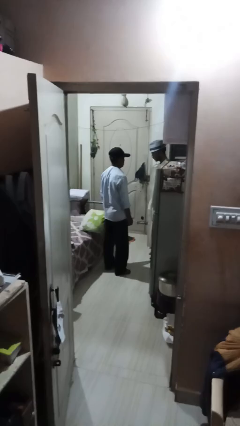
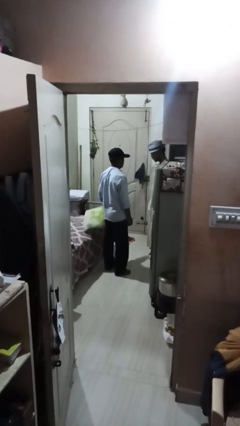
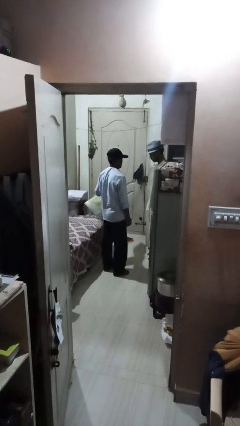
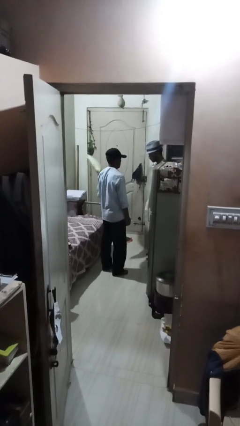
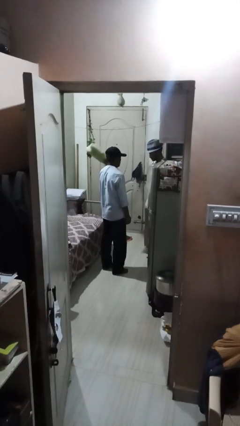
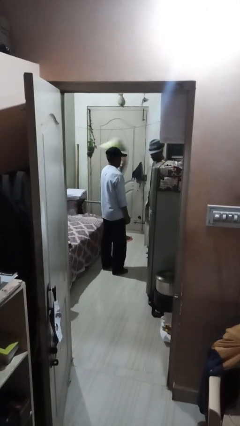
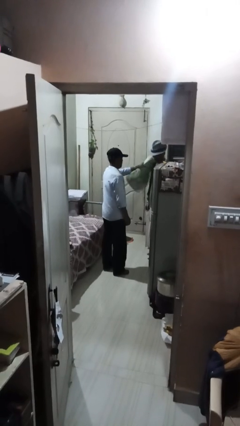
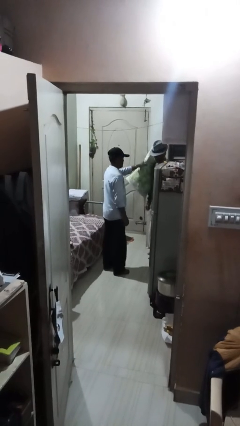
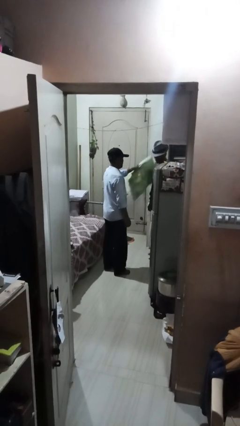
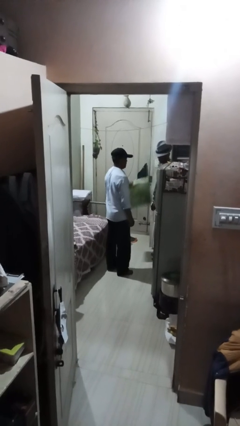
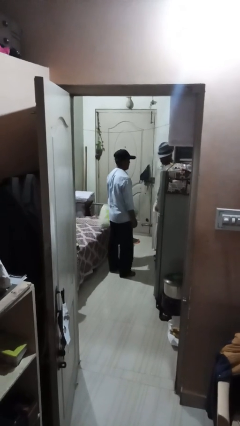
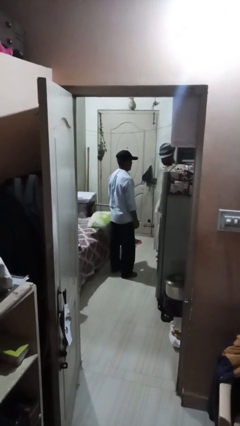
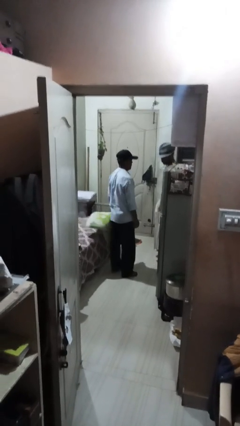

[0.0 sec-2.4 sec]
person hits person with pillow

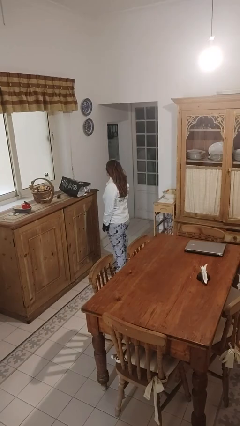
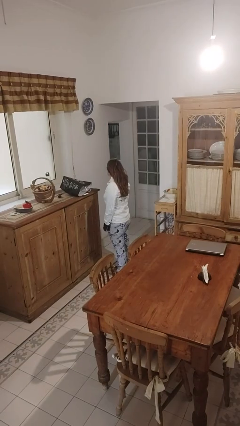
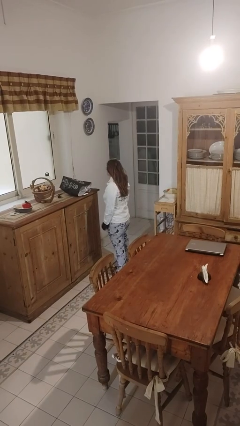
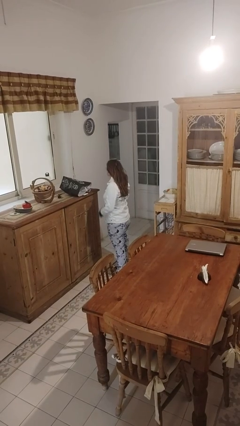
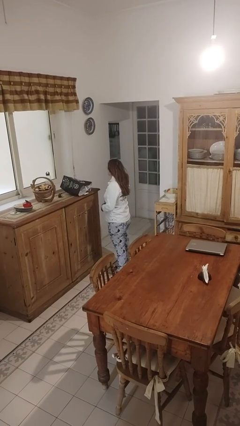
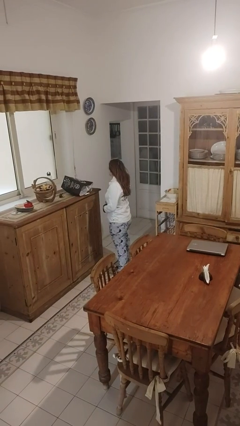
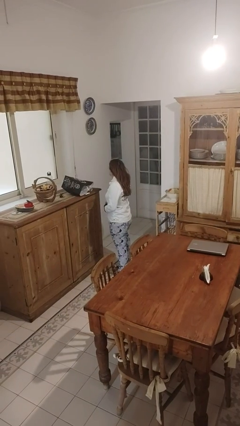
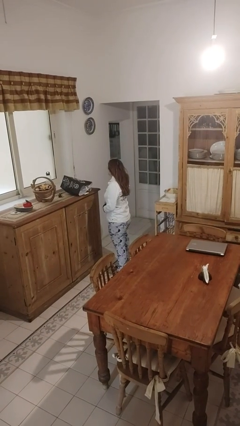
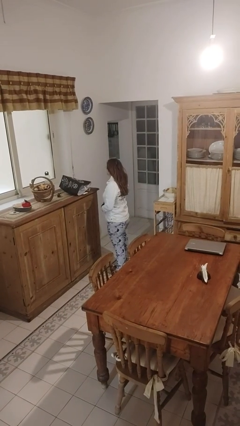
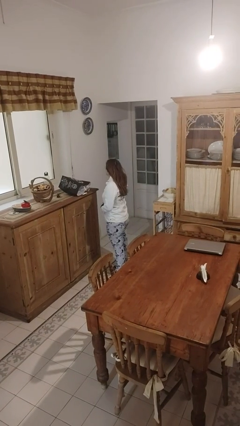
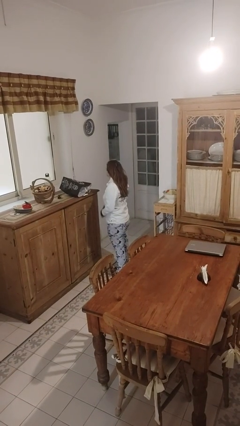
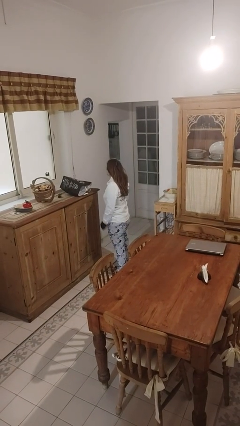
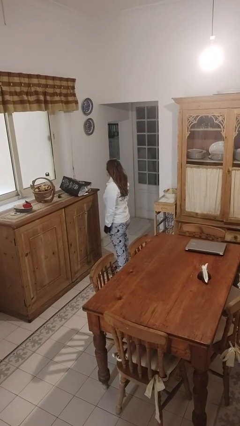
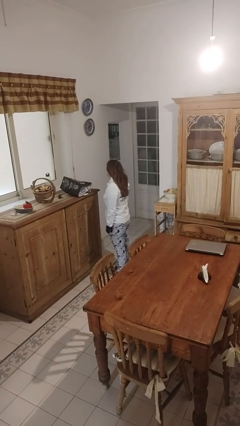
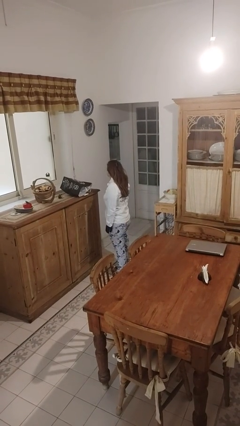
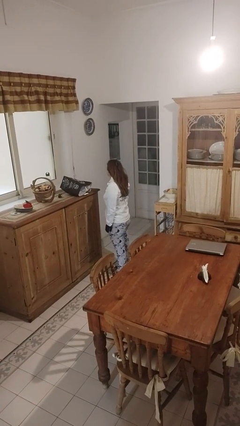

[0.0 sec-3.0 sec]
person unbuttons shirt

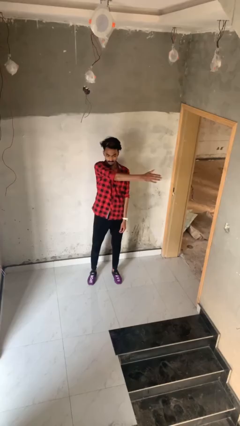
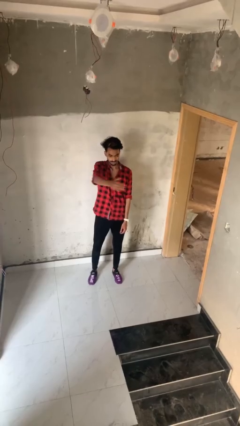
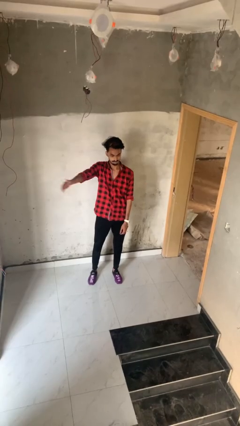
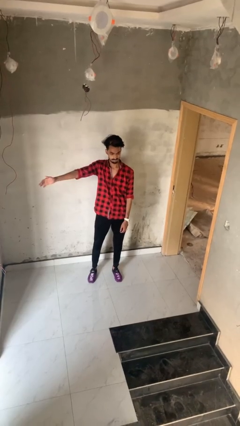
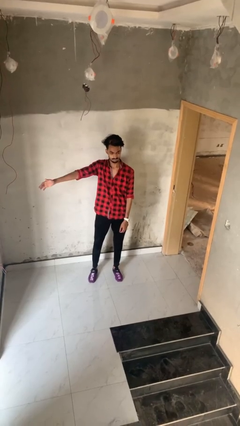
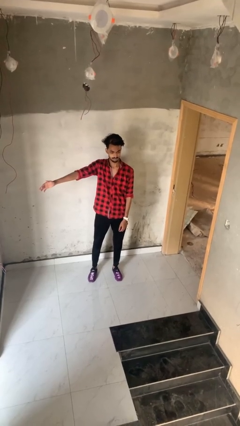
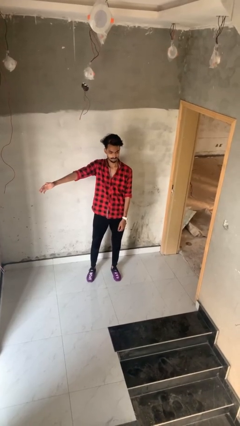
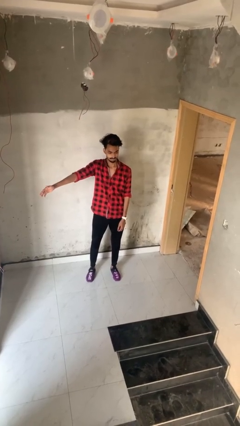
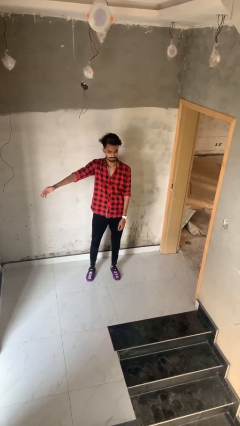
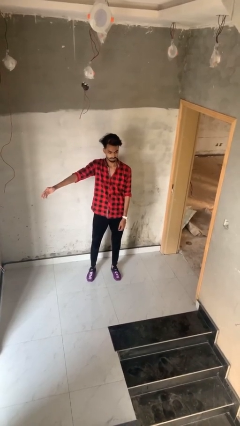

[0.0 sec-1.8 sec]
person gestures swipe right

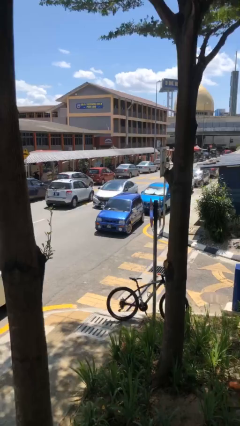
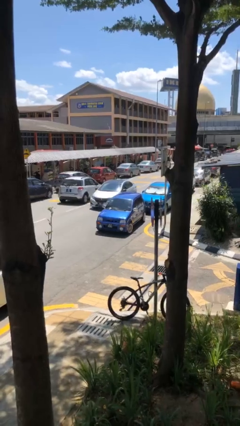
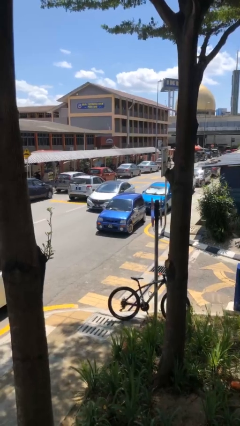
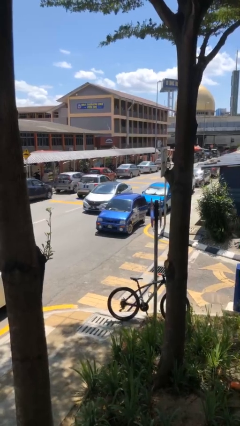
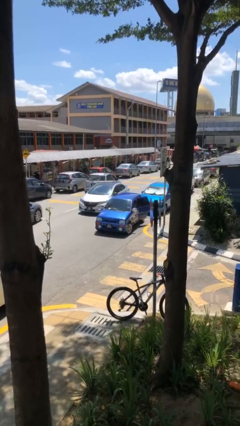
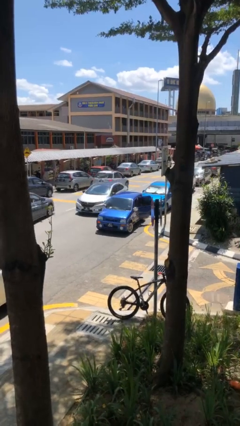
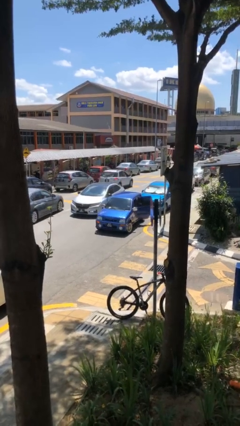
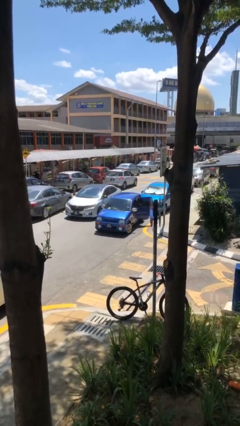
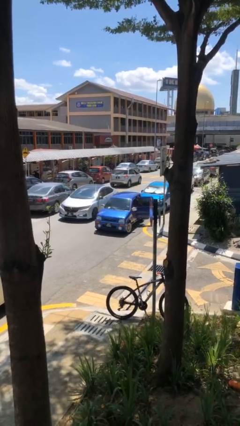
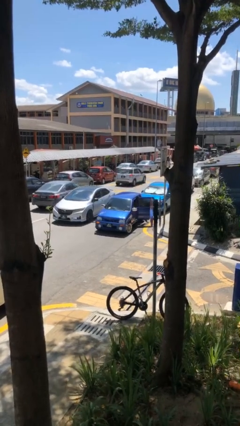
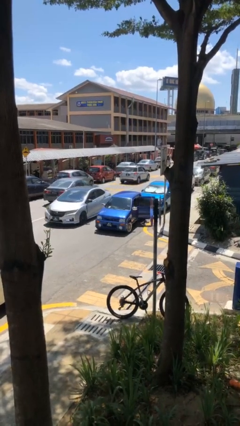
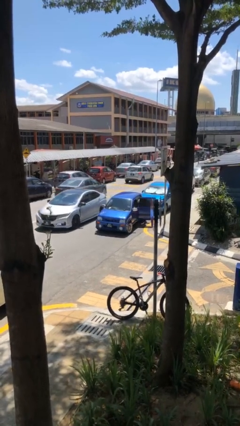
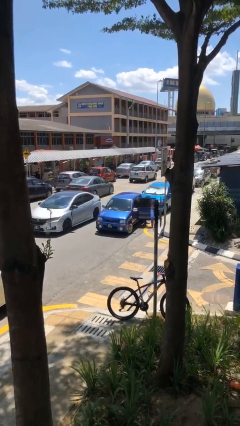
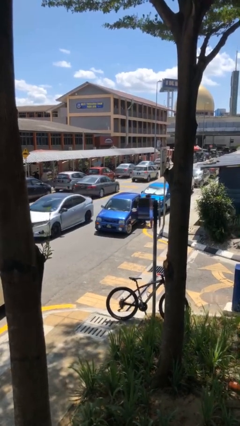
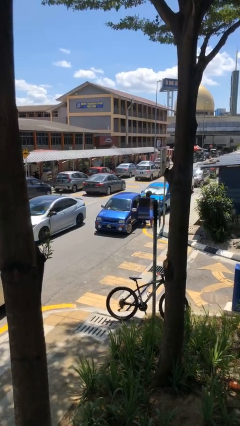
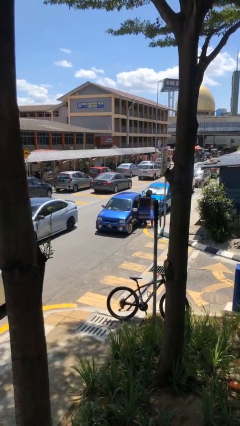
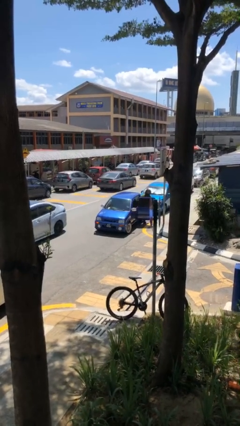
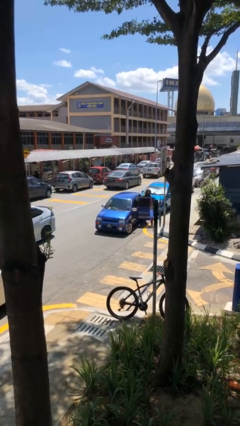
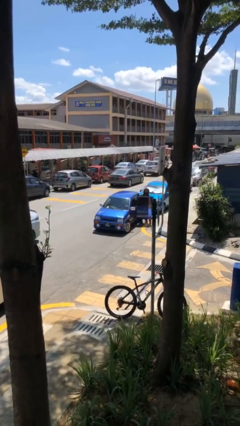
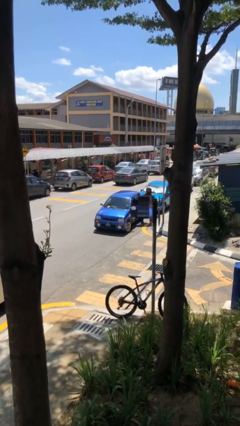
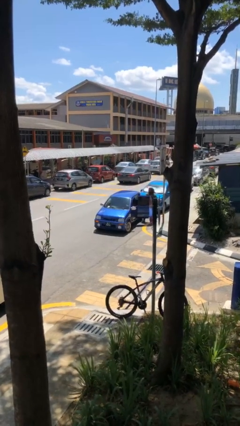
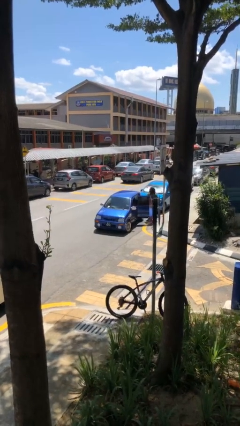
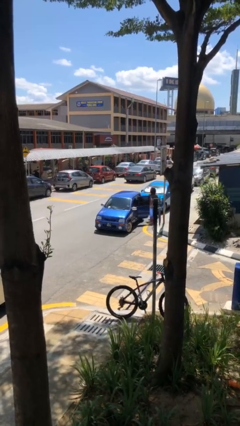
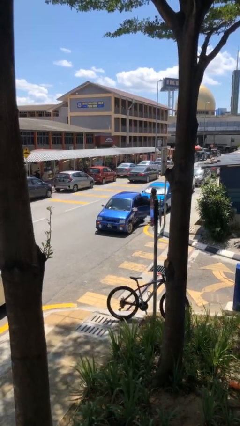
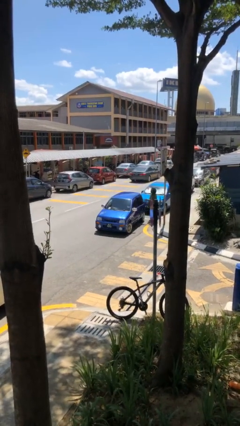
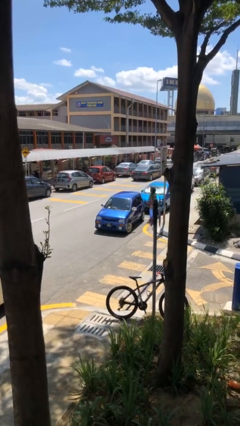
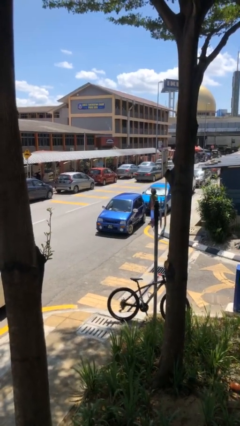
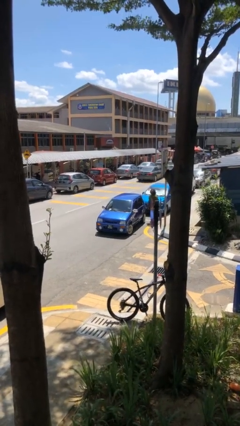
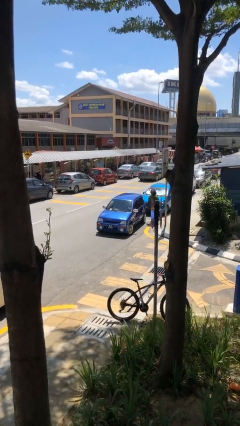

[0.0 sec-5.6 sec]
car drops off person

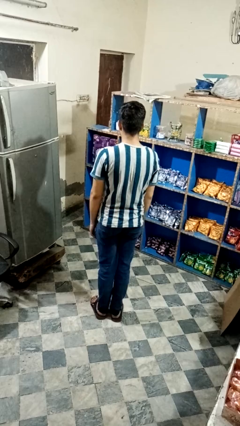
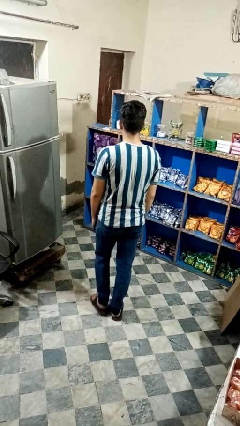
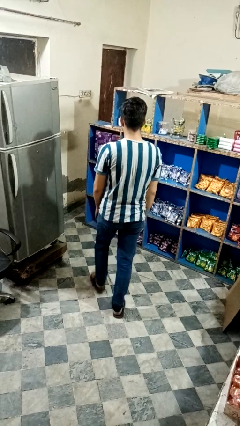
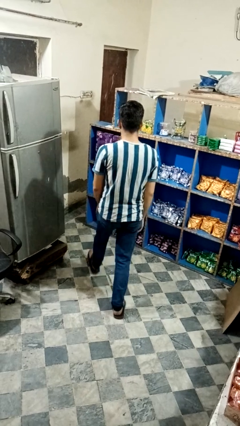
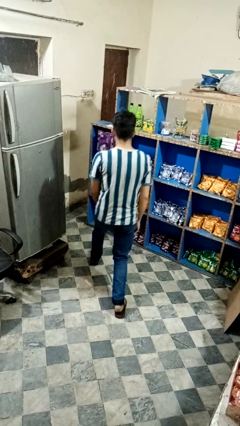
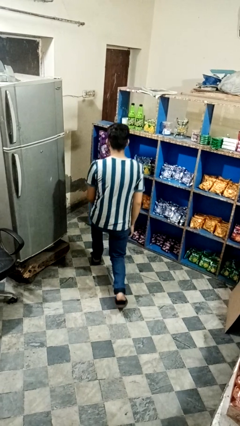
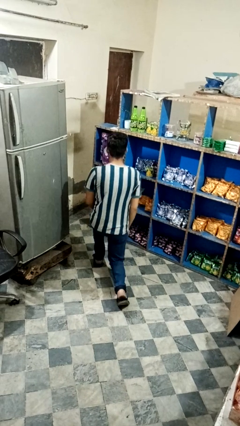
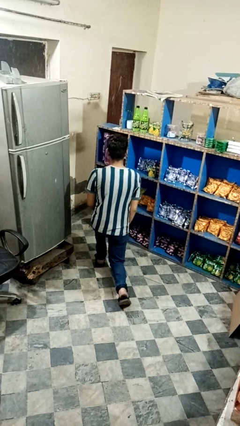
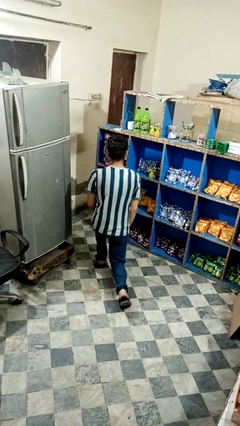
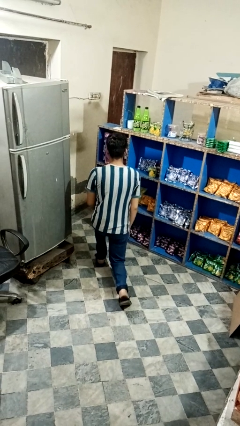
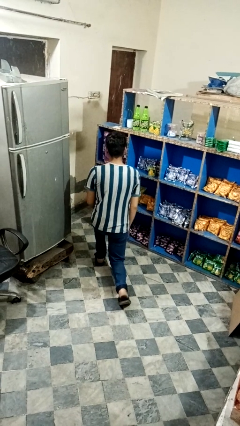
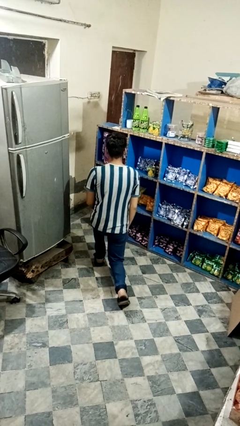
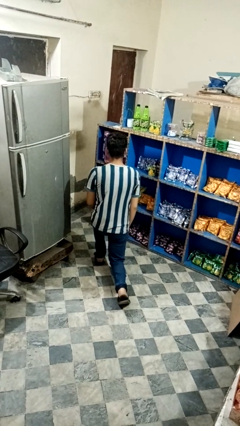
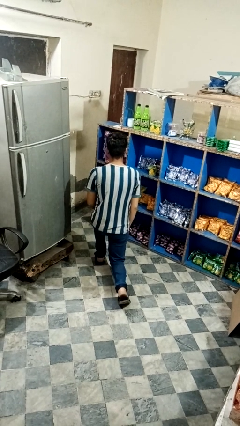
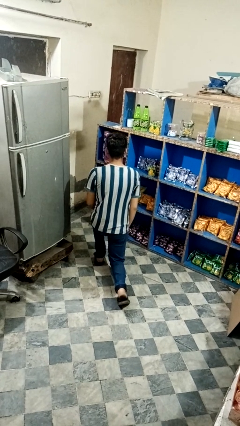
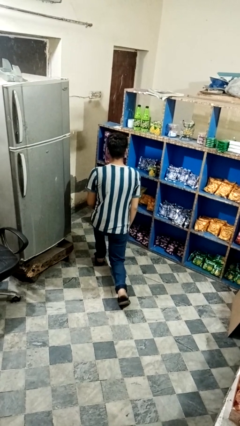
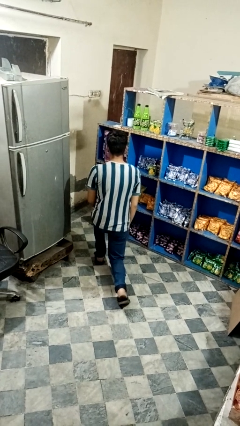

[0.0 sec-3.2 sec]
person exercises with lunges

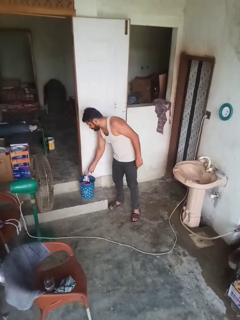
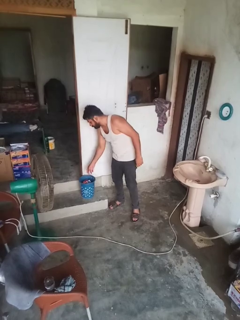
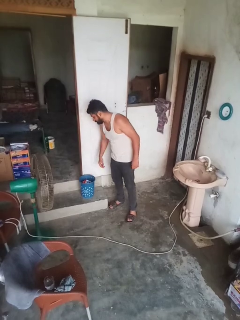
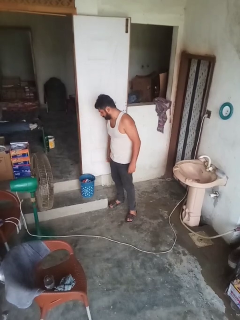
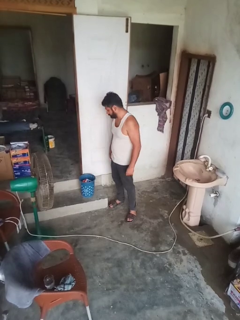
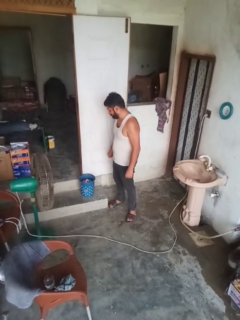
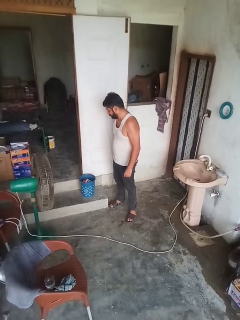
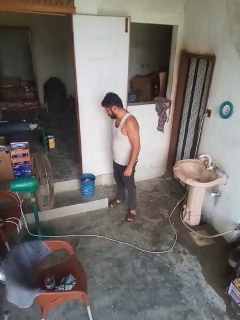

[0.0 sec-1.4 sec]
person discards trash
